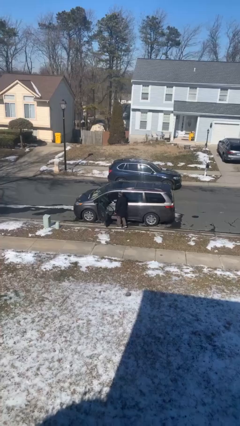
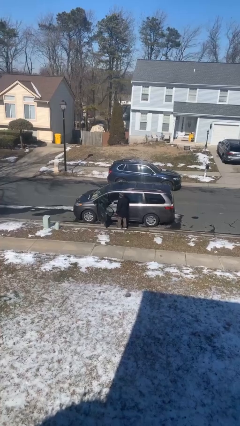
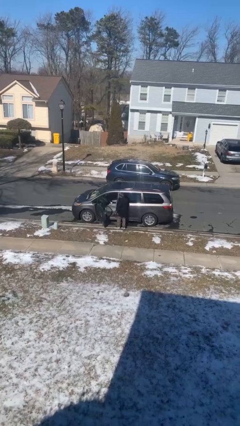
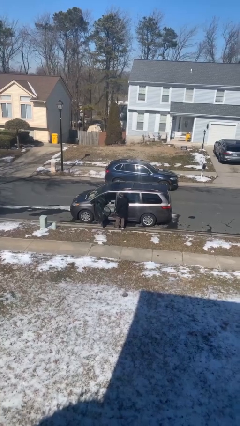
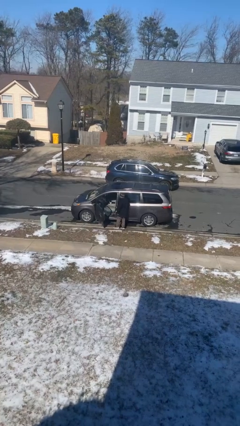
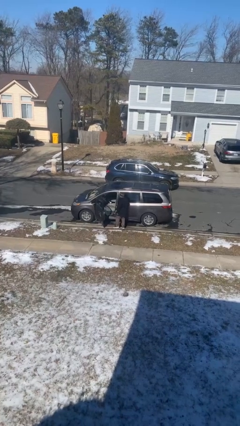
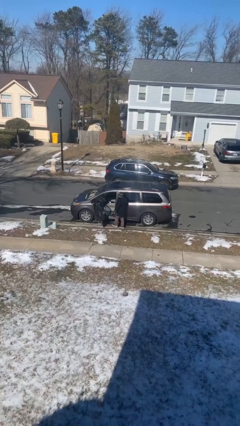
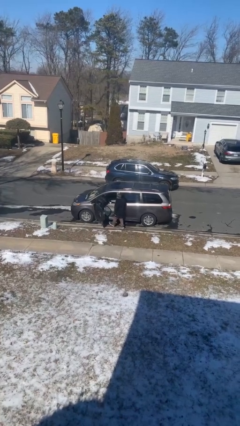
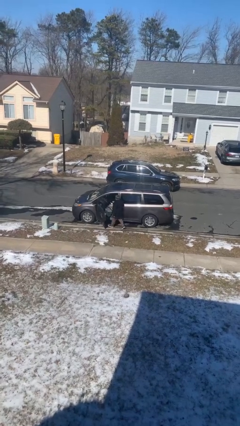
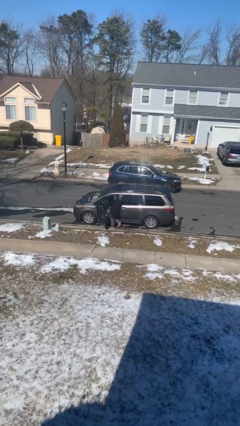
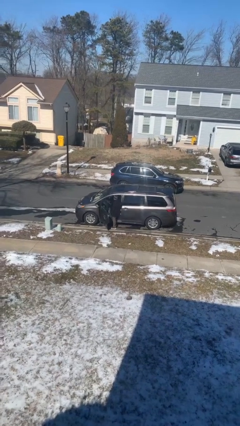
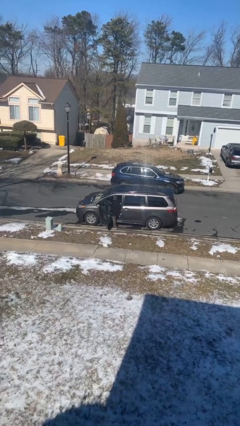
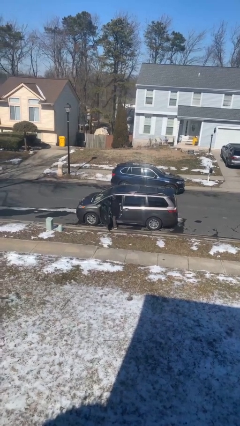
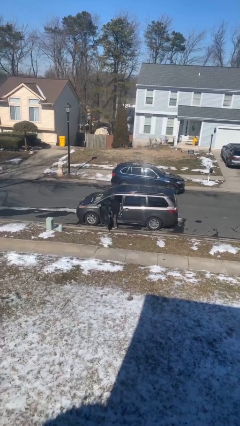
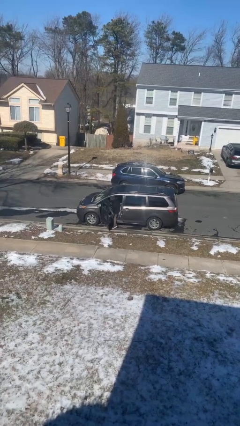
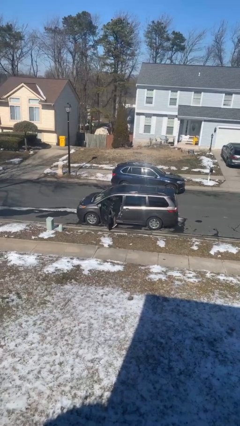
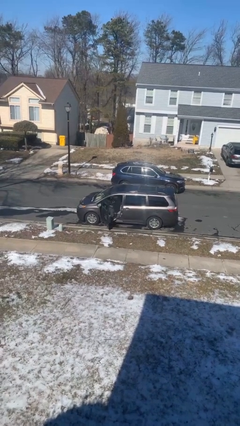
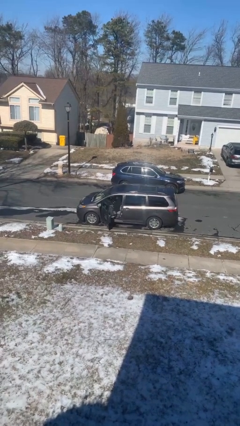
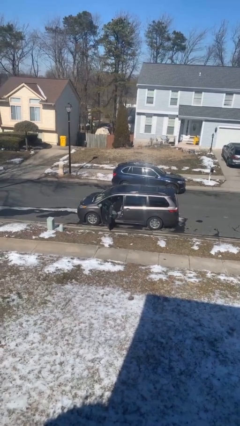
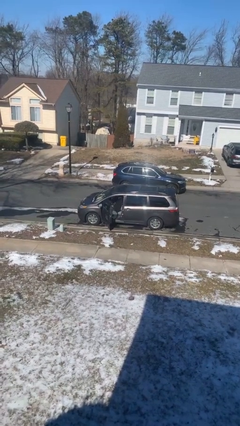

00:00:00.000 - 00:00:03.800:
person enters car

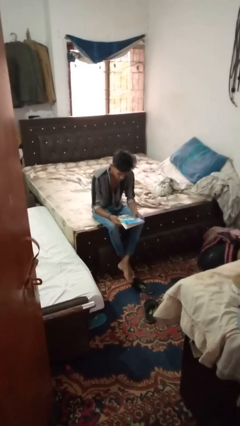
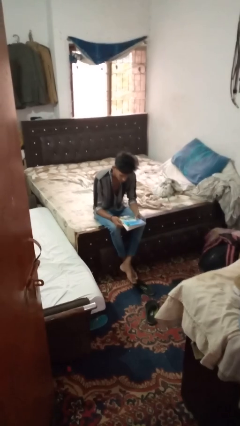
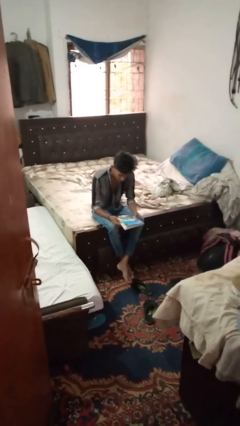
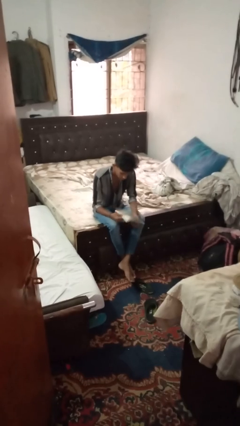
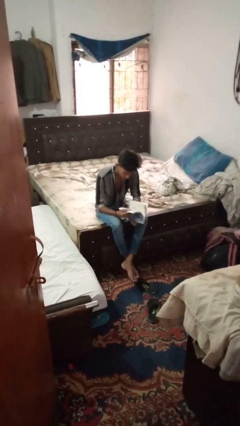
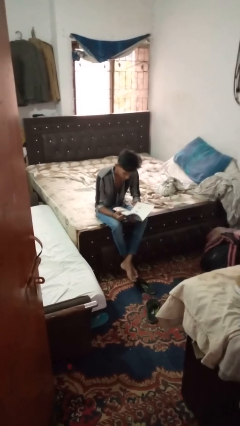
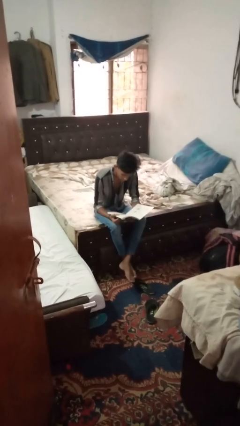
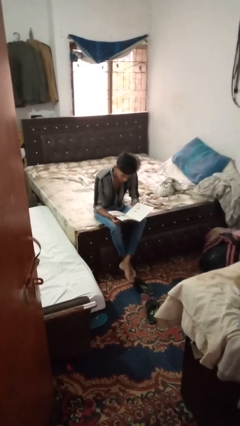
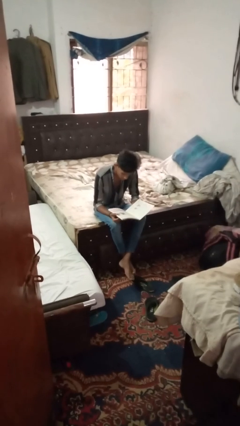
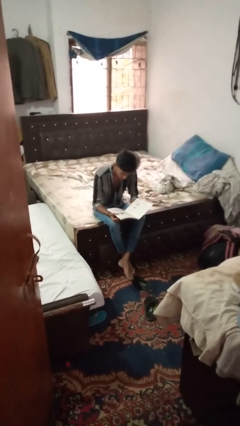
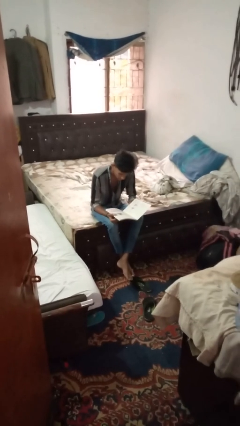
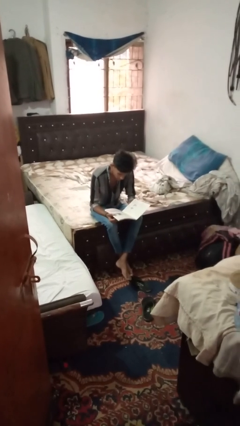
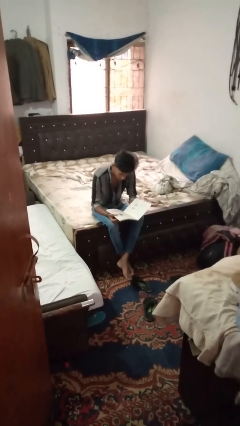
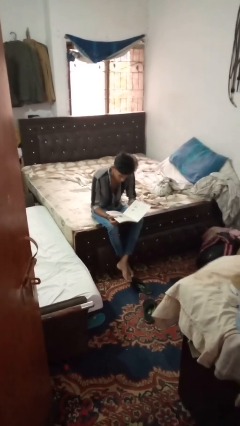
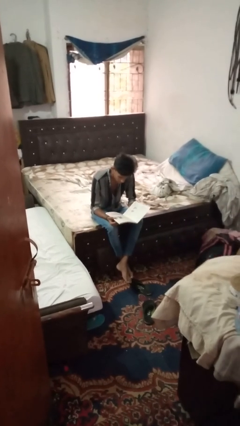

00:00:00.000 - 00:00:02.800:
person reads book

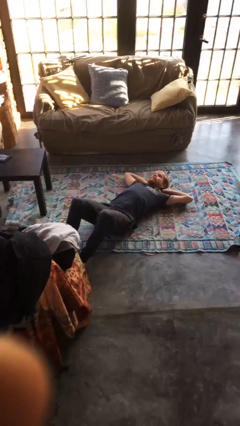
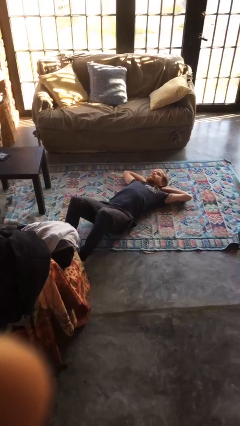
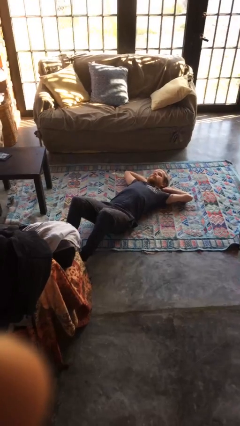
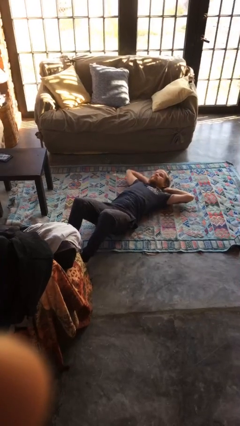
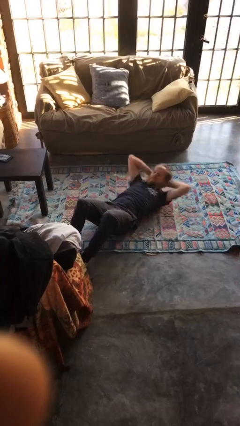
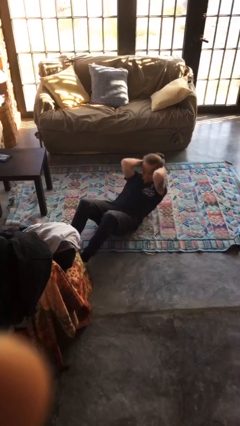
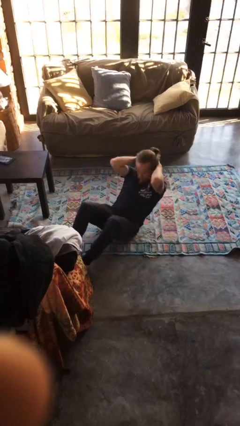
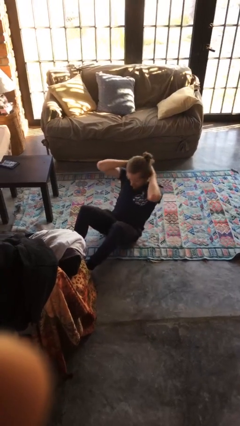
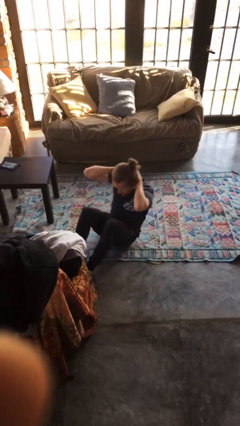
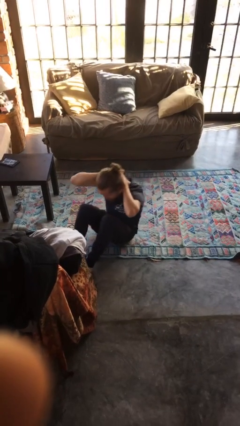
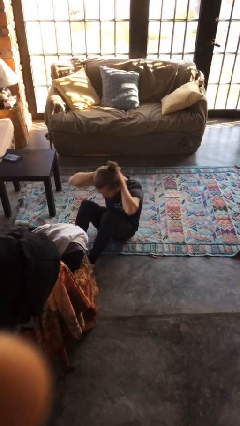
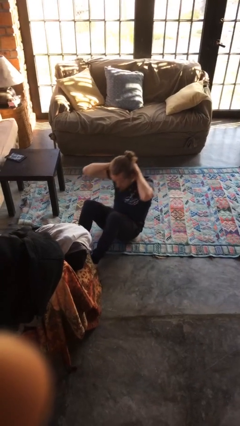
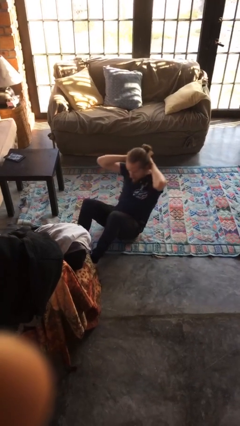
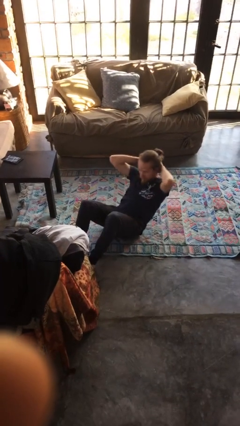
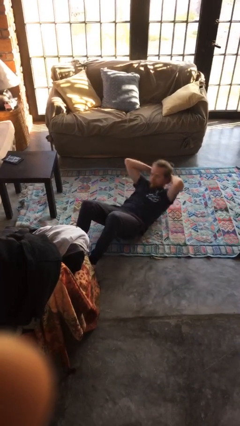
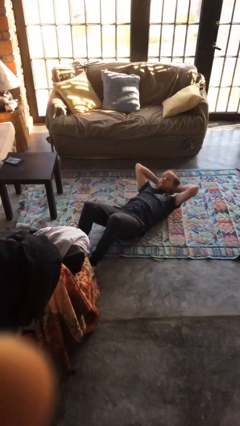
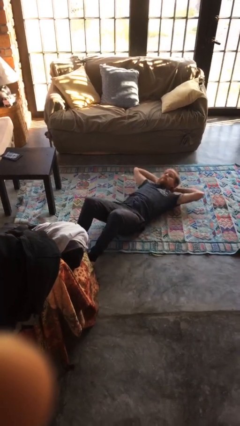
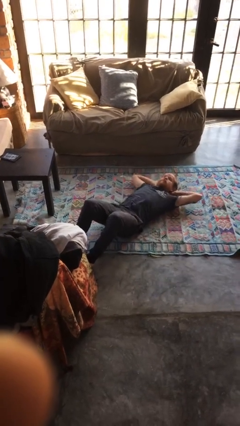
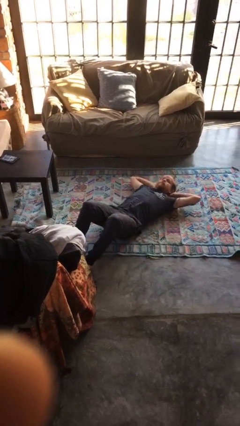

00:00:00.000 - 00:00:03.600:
person exercises with situp

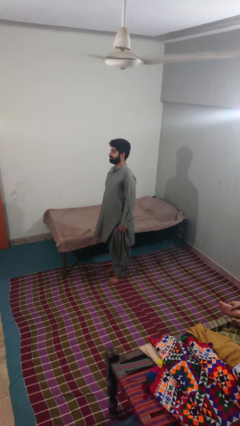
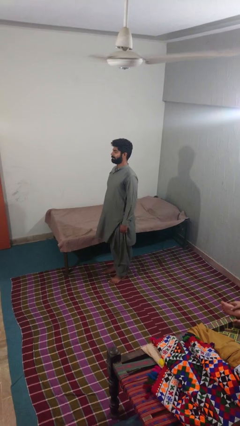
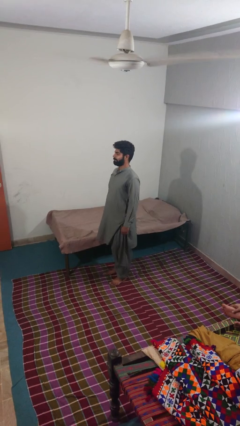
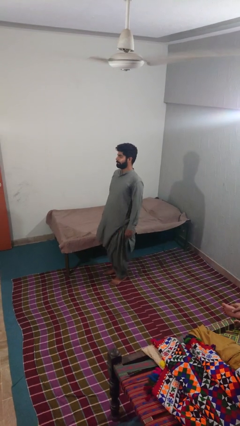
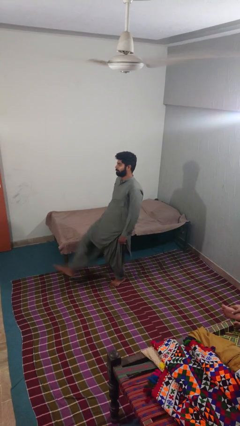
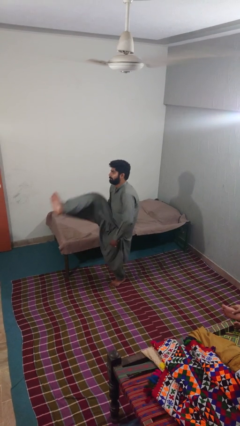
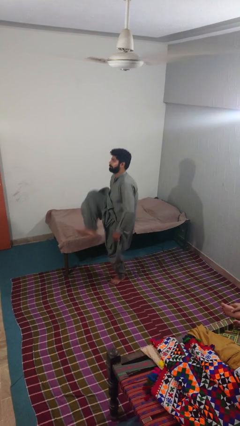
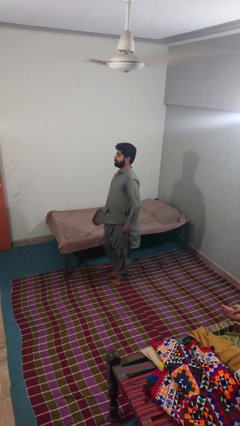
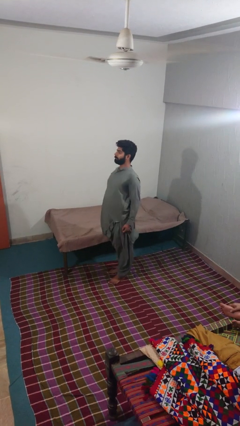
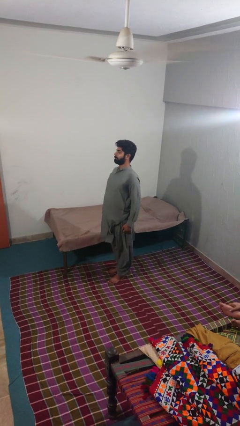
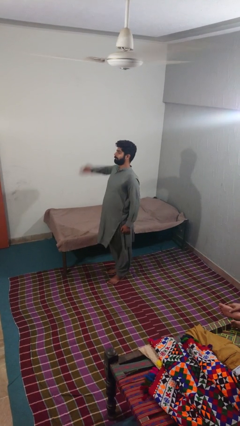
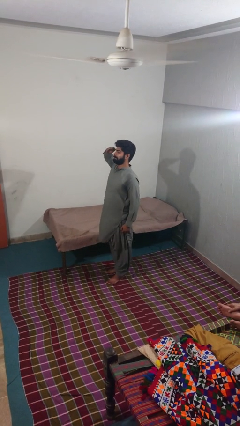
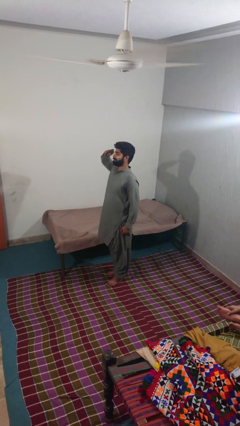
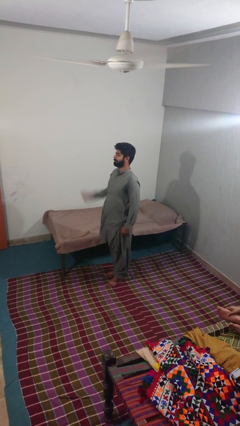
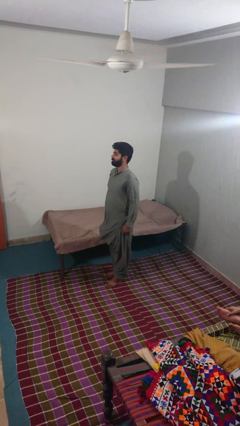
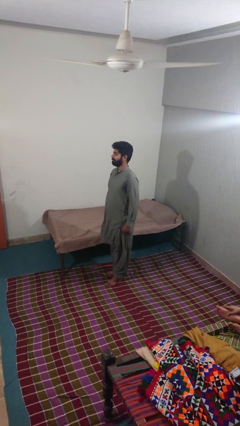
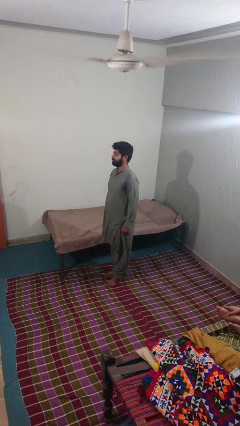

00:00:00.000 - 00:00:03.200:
person salutes

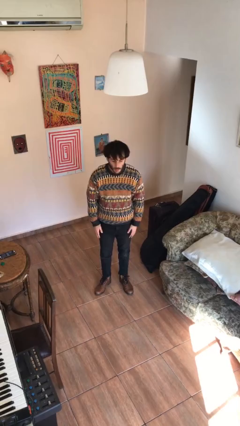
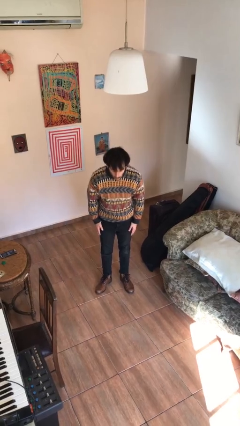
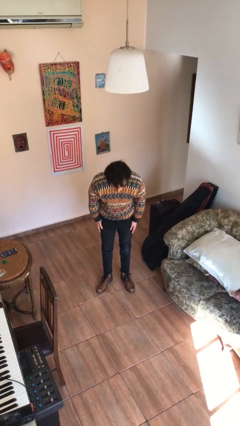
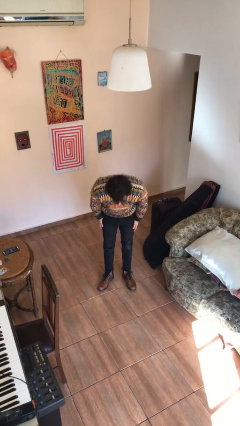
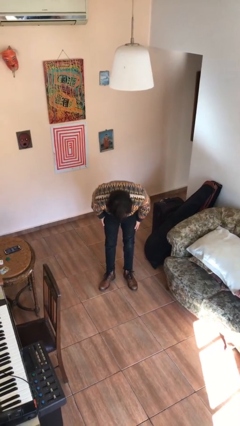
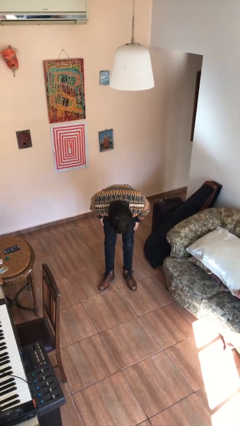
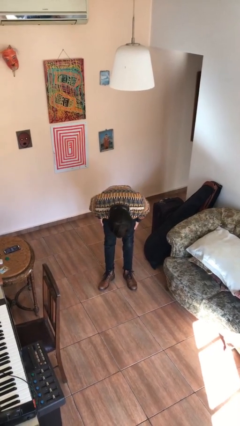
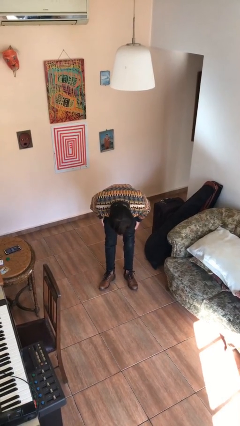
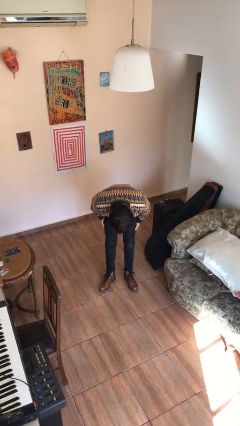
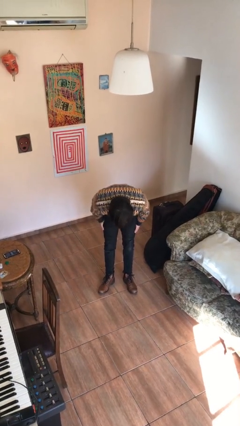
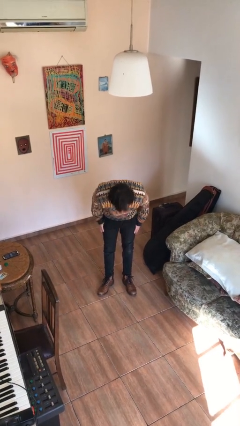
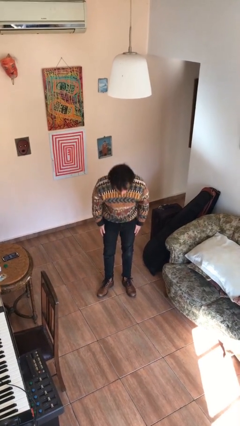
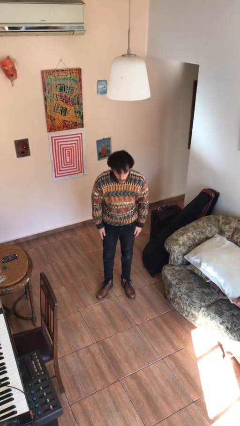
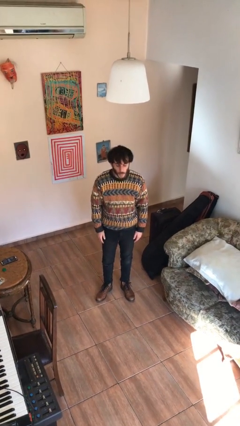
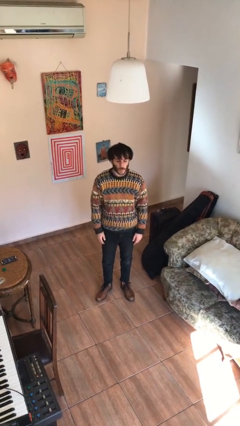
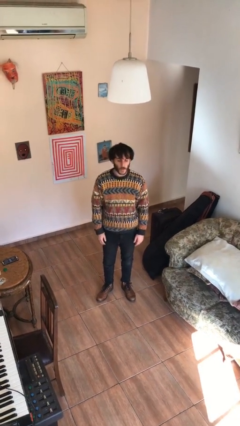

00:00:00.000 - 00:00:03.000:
person bows

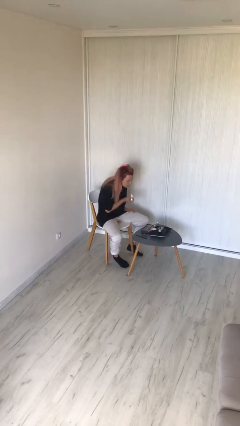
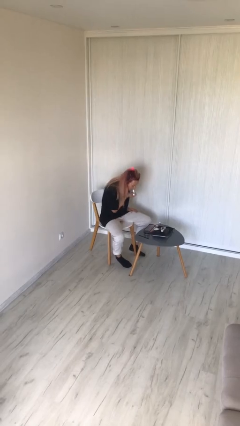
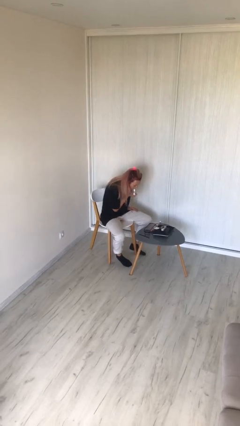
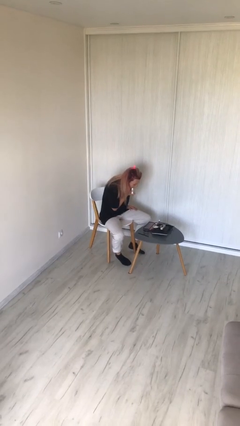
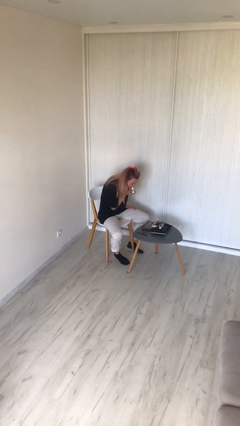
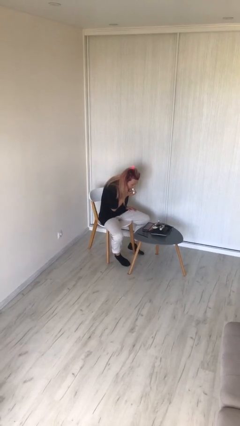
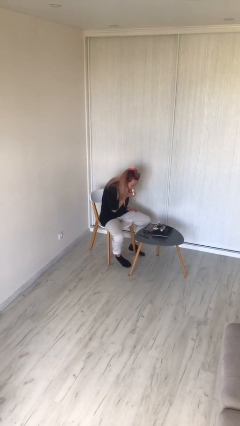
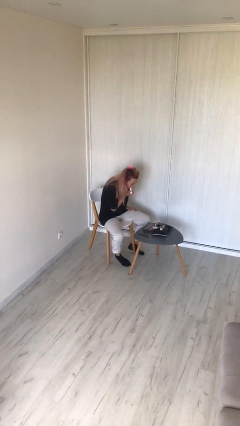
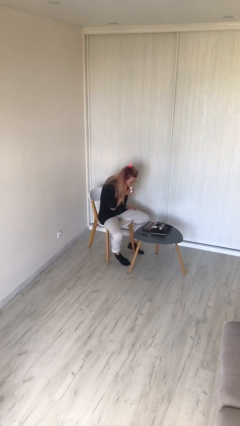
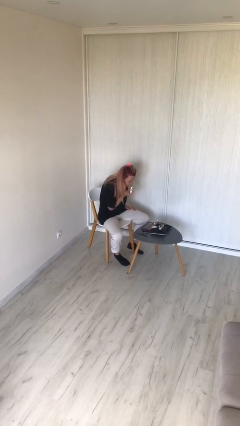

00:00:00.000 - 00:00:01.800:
person applies lip makeup
